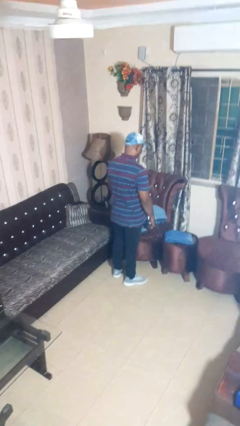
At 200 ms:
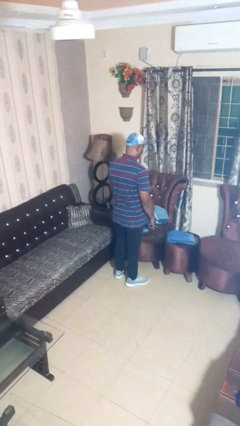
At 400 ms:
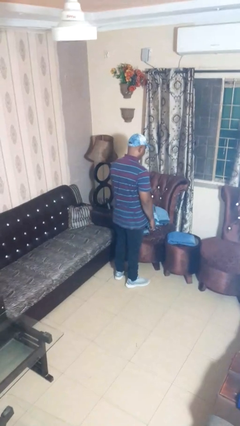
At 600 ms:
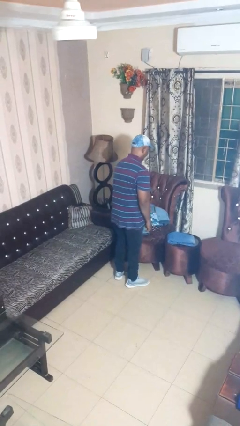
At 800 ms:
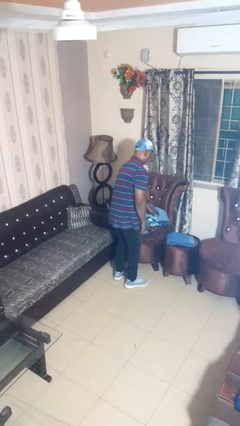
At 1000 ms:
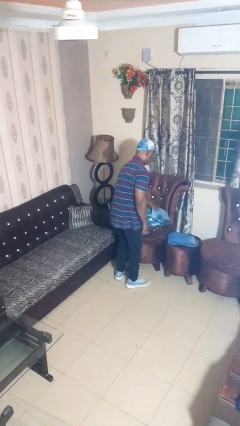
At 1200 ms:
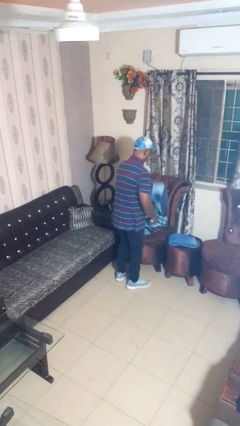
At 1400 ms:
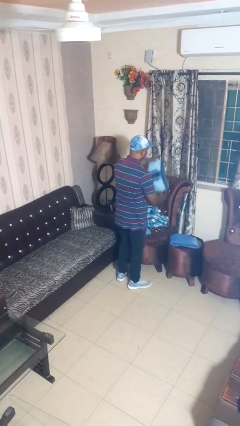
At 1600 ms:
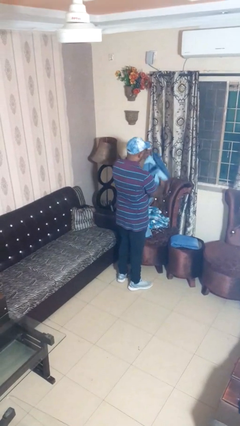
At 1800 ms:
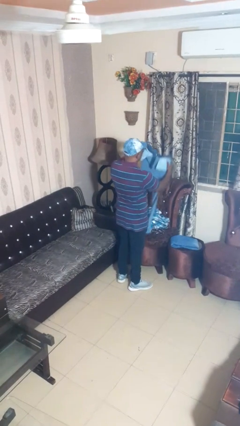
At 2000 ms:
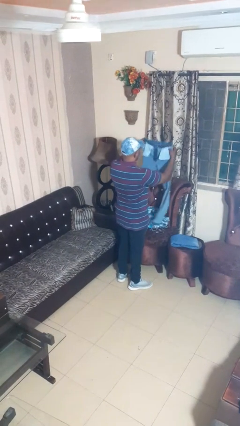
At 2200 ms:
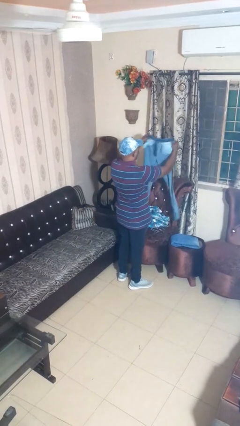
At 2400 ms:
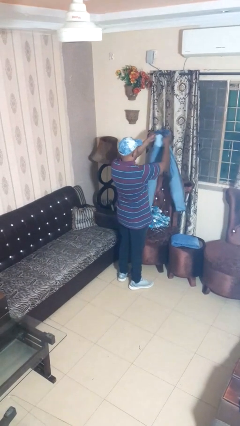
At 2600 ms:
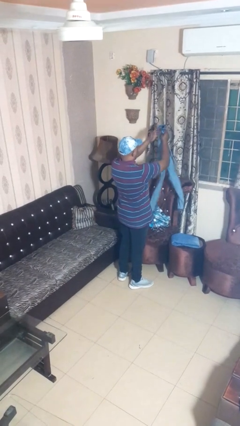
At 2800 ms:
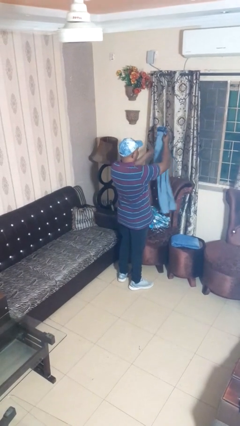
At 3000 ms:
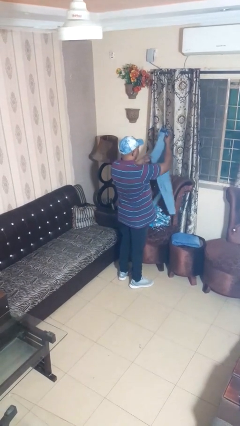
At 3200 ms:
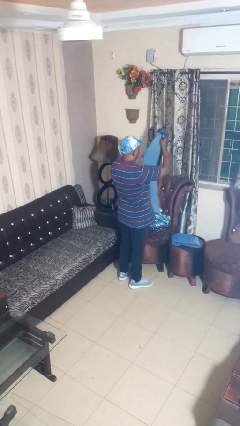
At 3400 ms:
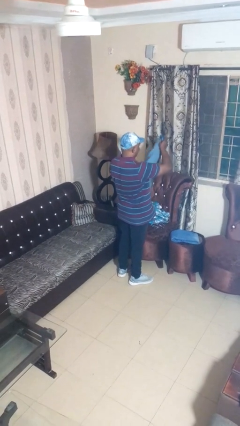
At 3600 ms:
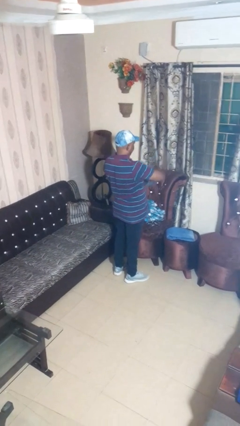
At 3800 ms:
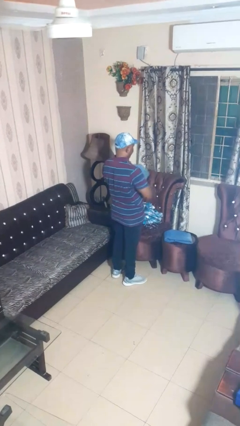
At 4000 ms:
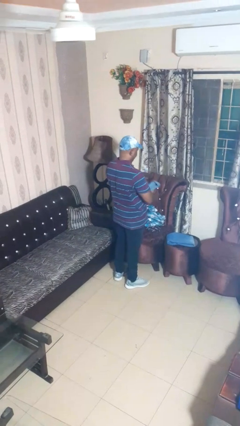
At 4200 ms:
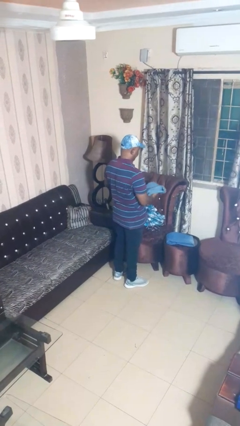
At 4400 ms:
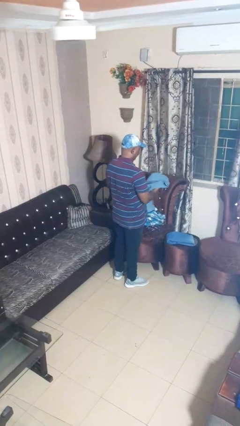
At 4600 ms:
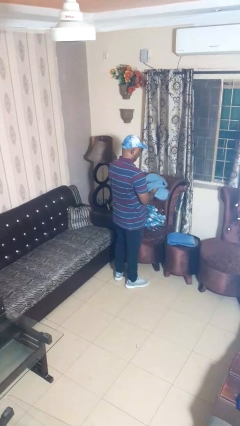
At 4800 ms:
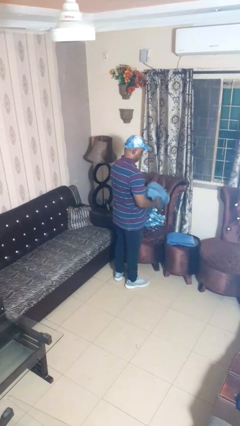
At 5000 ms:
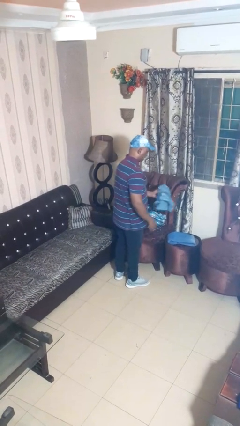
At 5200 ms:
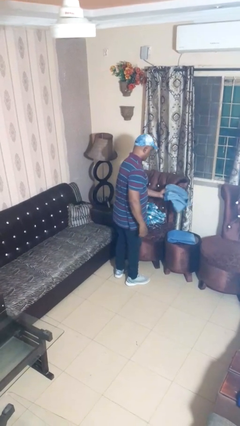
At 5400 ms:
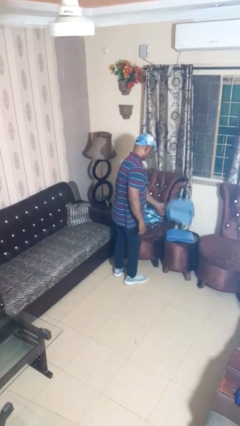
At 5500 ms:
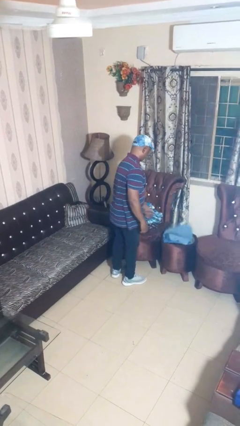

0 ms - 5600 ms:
person folds pants

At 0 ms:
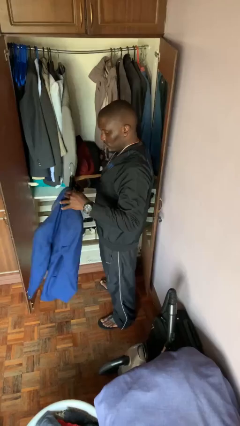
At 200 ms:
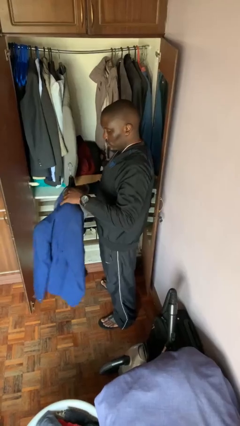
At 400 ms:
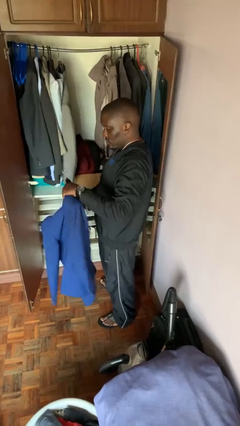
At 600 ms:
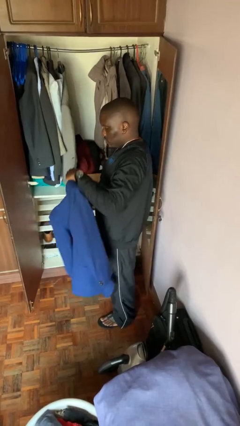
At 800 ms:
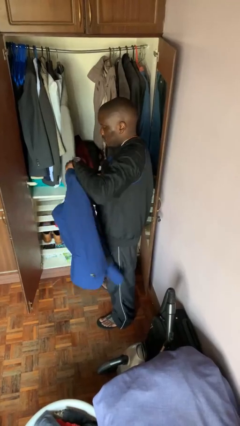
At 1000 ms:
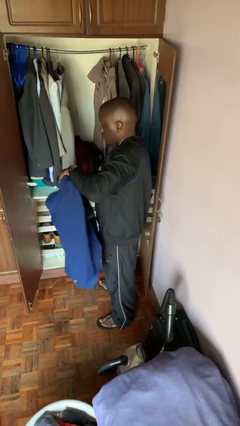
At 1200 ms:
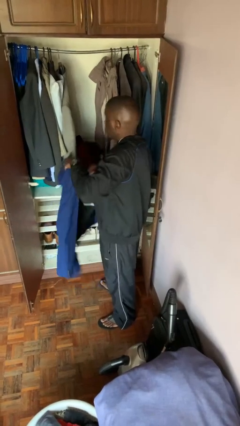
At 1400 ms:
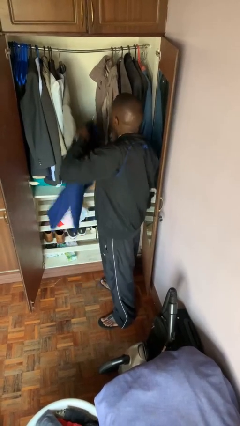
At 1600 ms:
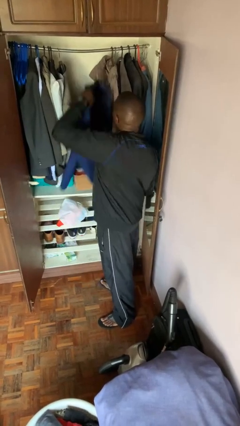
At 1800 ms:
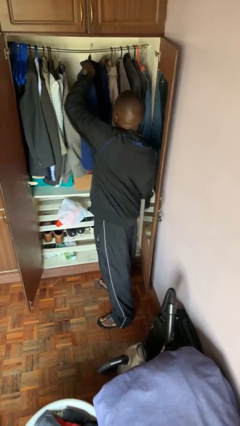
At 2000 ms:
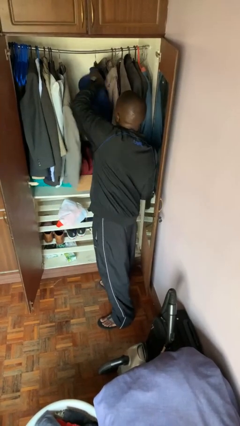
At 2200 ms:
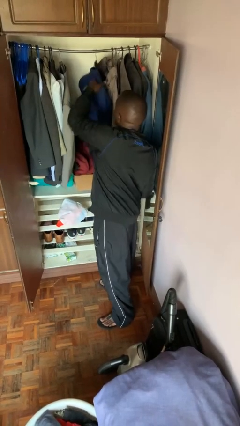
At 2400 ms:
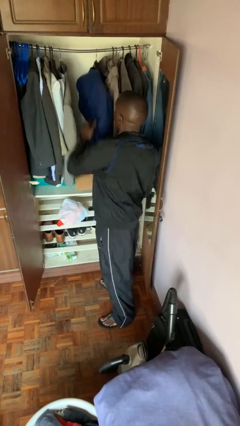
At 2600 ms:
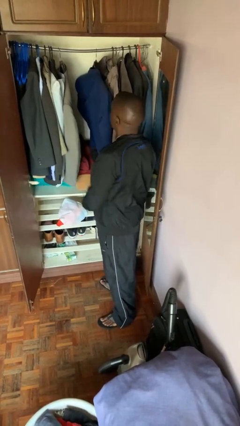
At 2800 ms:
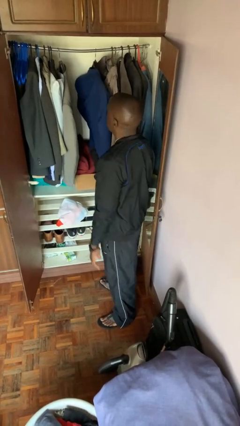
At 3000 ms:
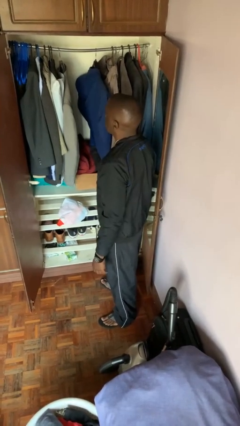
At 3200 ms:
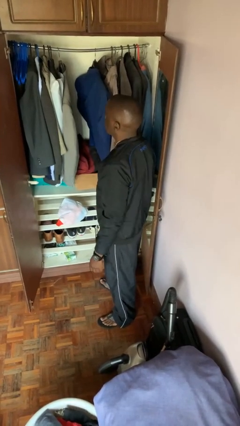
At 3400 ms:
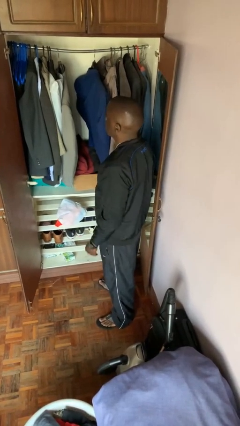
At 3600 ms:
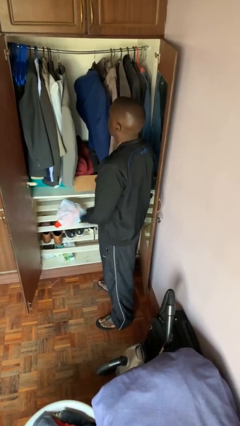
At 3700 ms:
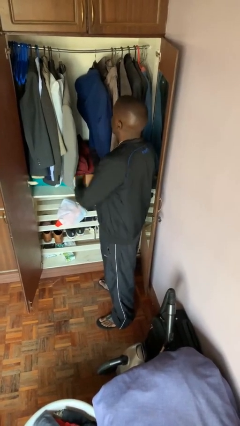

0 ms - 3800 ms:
person puts clothes into closet

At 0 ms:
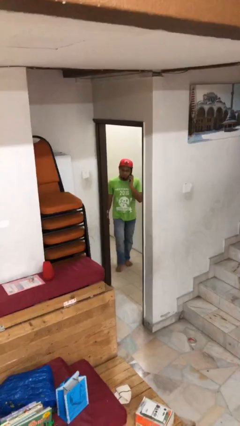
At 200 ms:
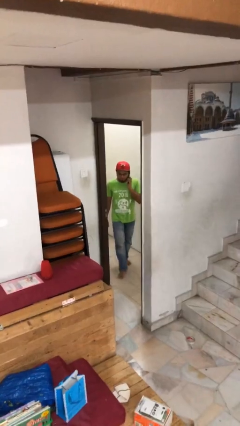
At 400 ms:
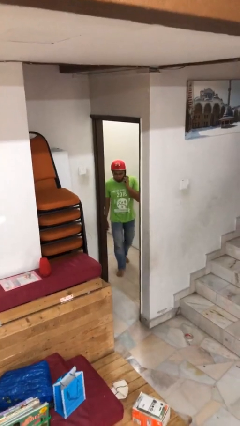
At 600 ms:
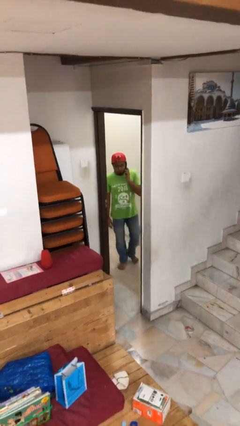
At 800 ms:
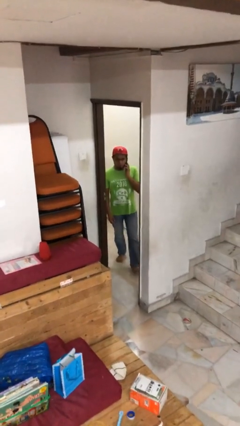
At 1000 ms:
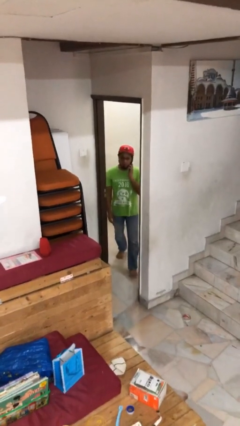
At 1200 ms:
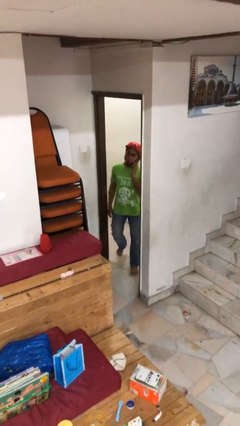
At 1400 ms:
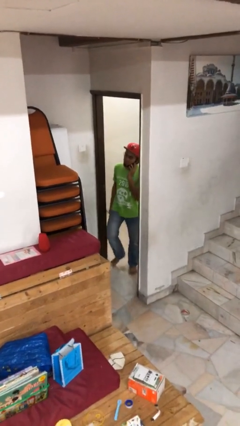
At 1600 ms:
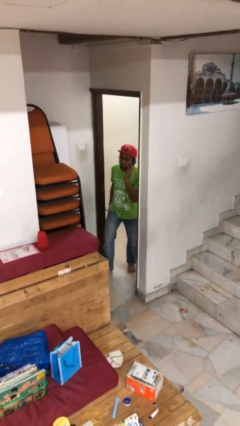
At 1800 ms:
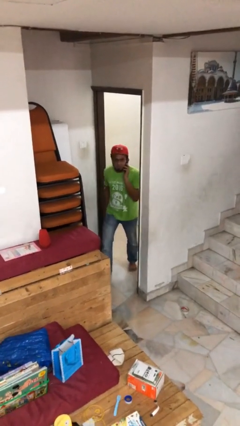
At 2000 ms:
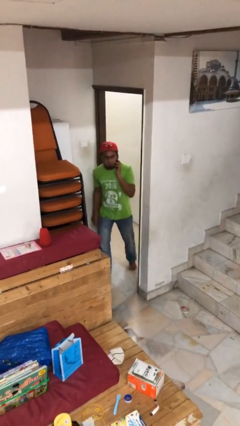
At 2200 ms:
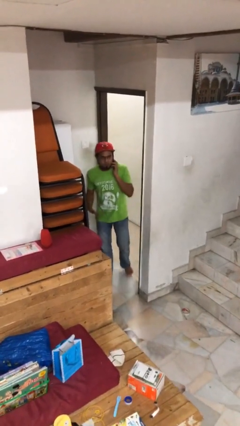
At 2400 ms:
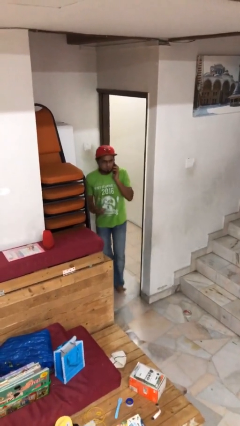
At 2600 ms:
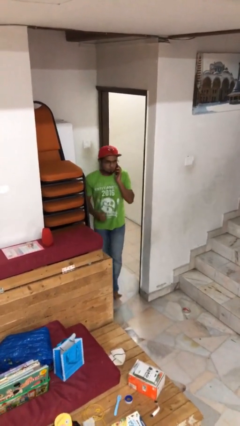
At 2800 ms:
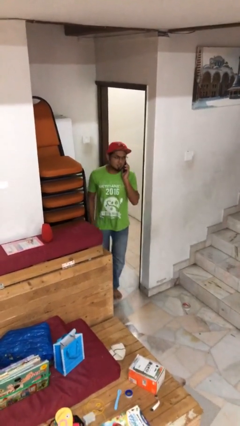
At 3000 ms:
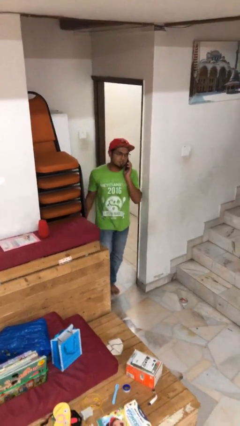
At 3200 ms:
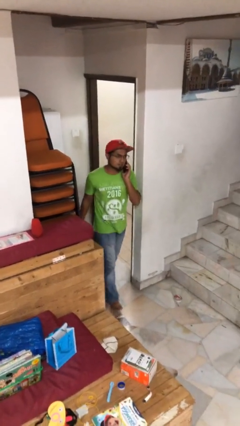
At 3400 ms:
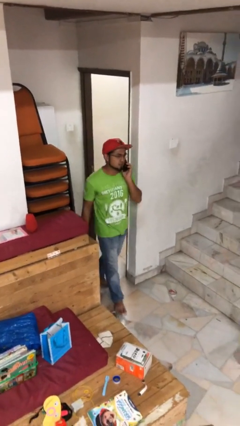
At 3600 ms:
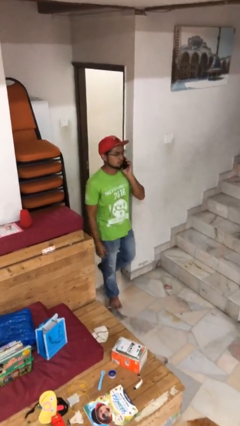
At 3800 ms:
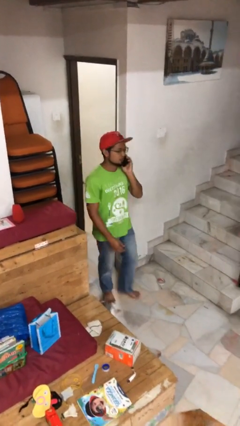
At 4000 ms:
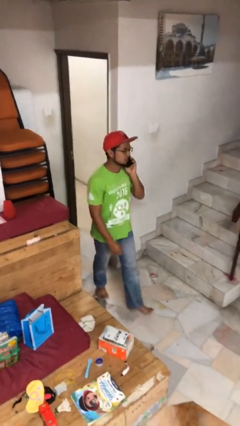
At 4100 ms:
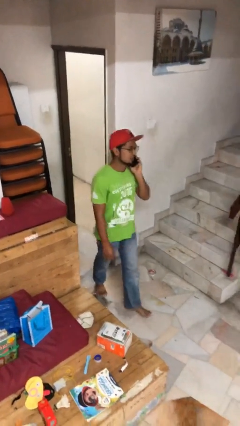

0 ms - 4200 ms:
person enters scene through structure

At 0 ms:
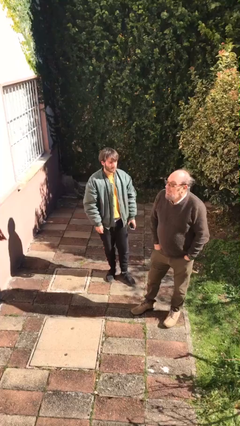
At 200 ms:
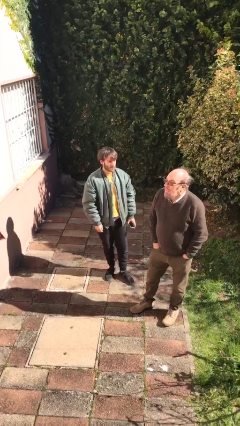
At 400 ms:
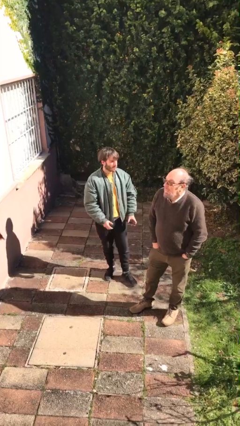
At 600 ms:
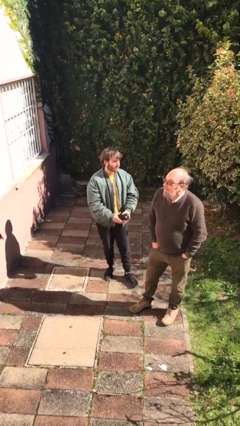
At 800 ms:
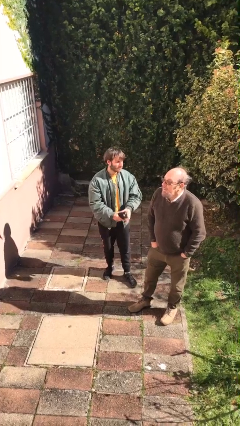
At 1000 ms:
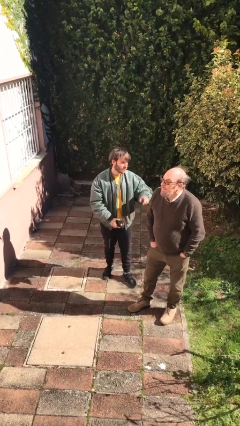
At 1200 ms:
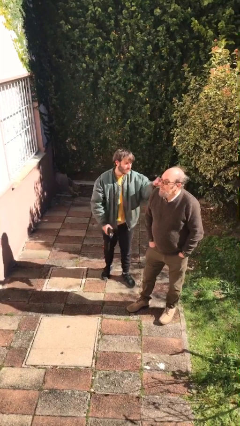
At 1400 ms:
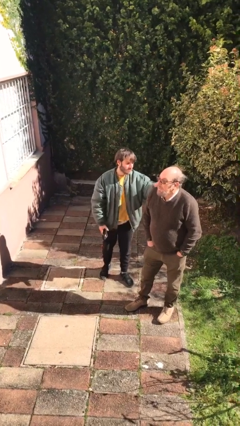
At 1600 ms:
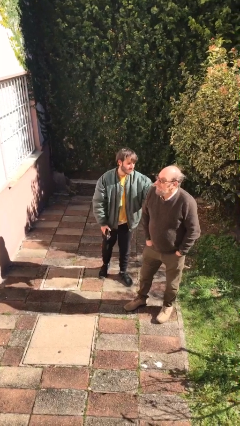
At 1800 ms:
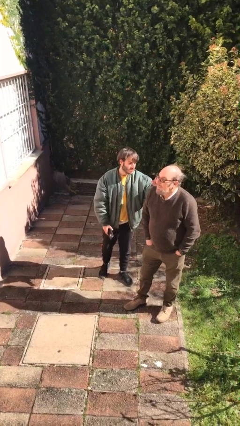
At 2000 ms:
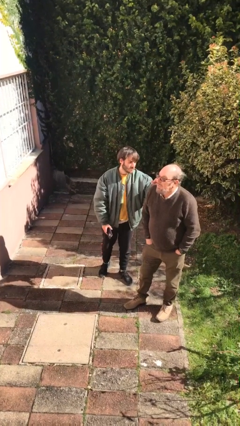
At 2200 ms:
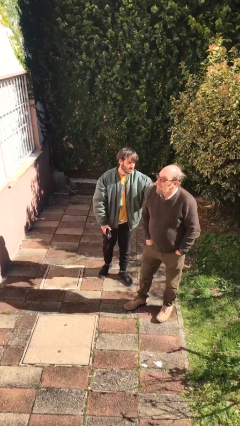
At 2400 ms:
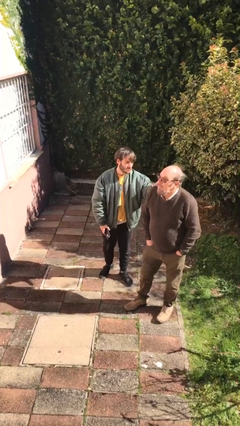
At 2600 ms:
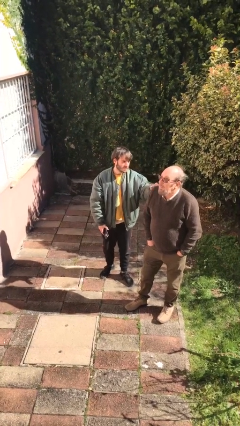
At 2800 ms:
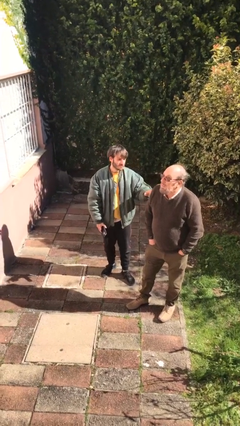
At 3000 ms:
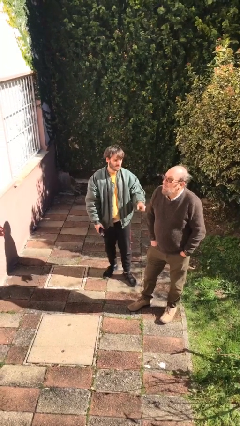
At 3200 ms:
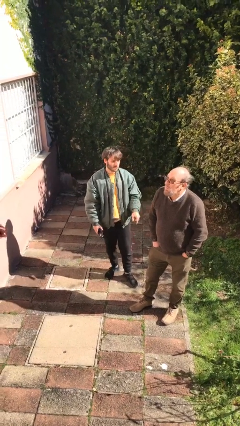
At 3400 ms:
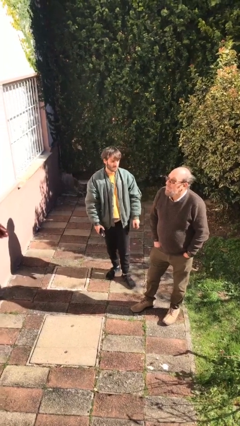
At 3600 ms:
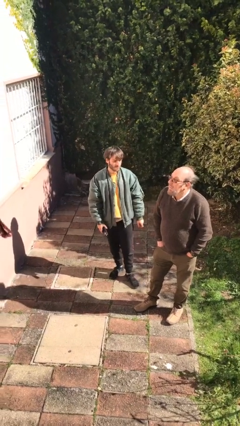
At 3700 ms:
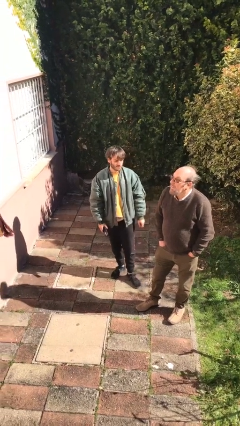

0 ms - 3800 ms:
person touches back of person

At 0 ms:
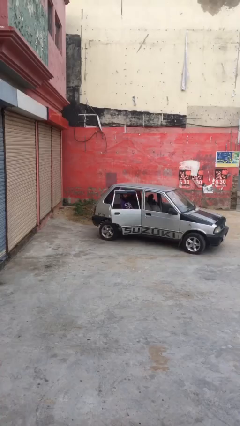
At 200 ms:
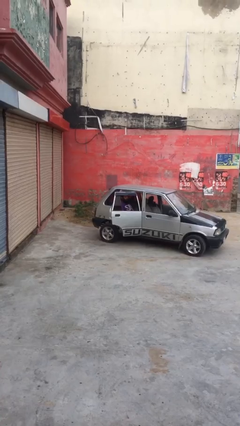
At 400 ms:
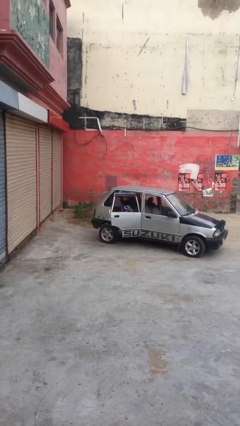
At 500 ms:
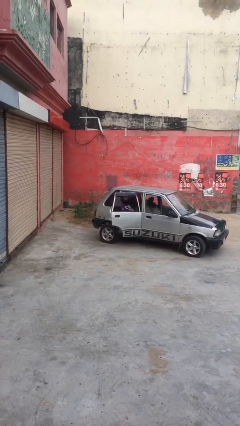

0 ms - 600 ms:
person closes car door
